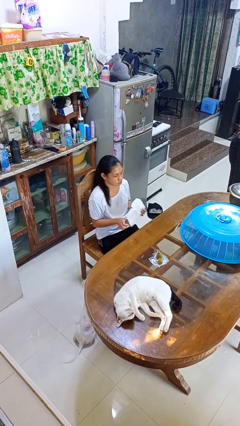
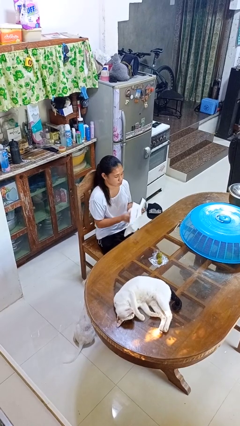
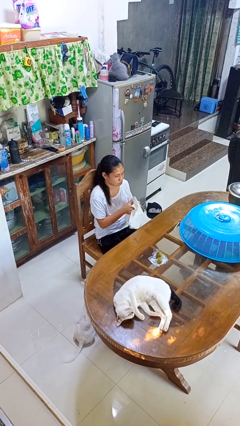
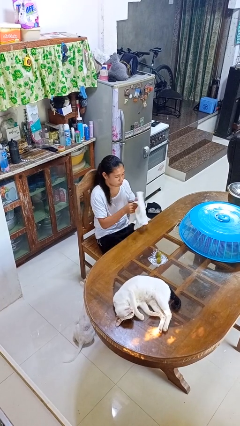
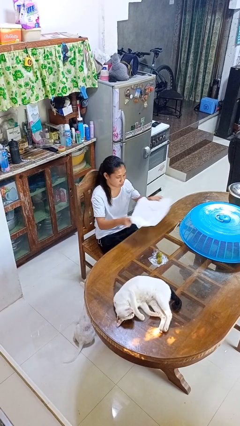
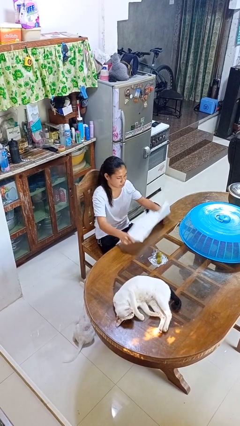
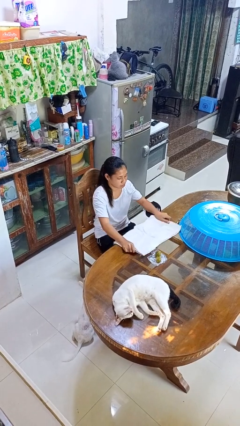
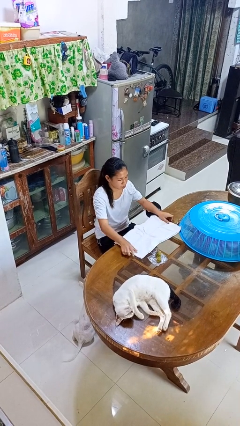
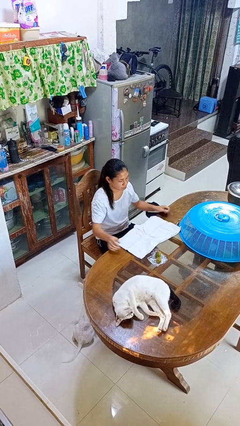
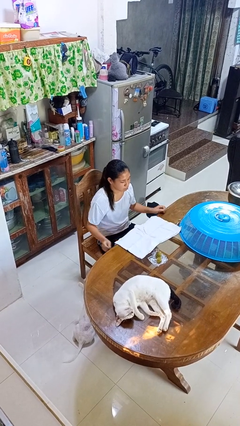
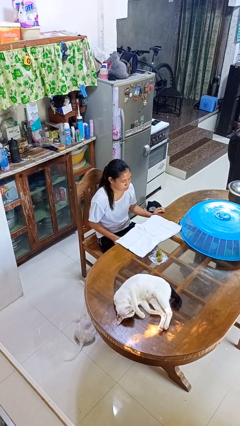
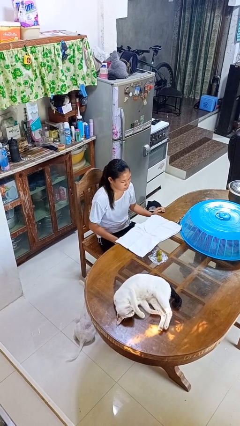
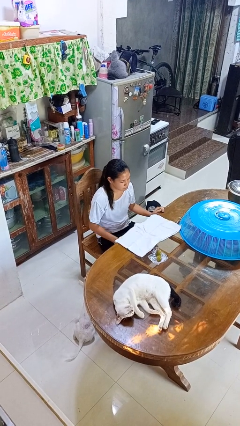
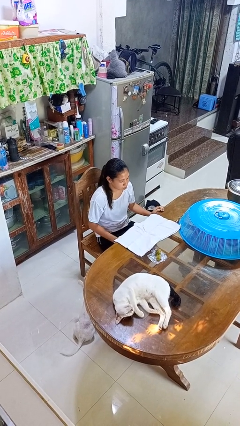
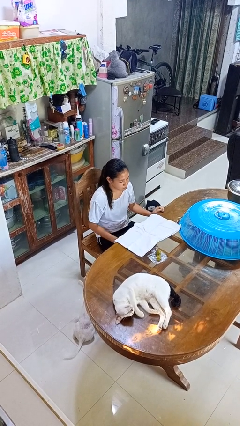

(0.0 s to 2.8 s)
person spreads tablecloth

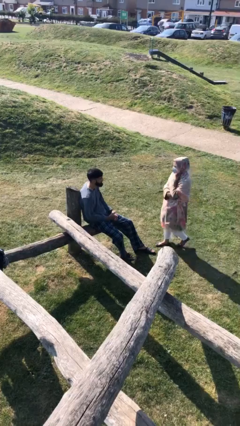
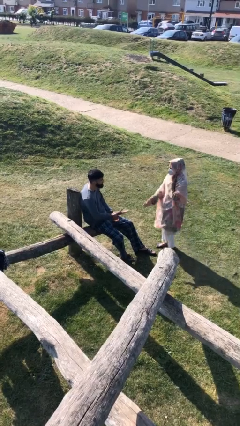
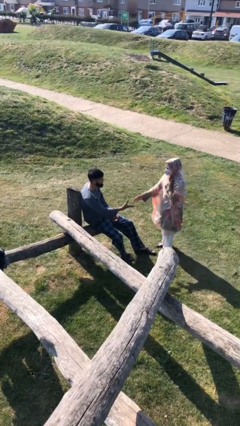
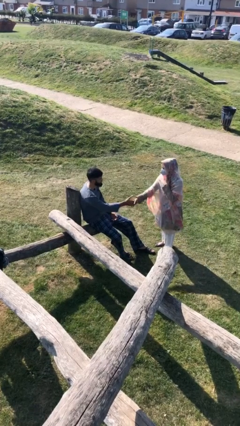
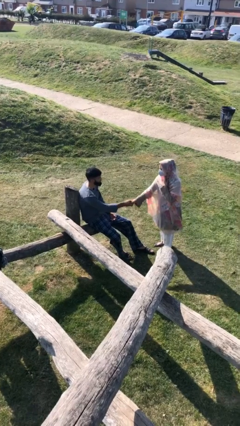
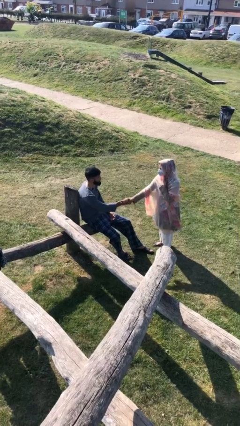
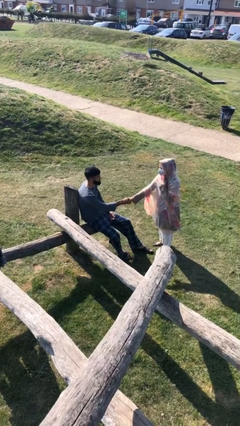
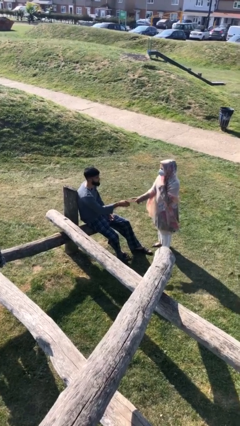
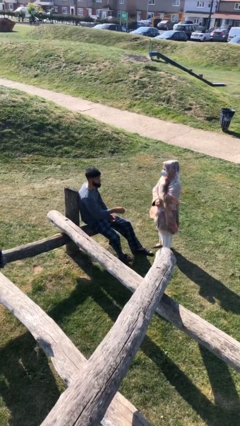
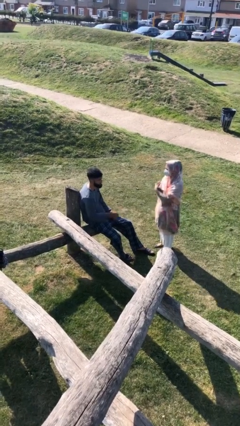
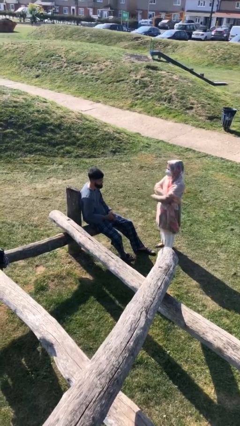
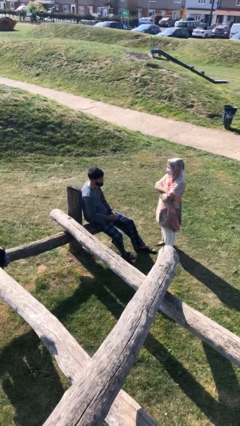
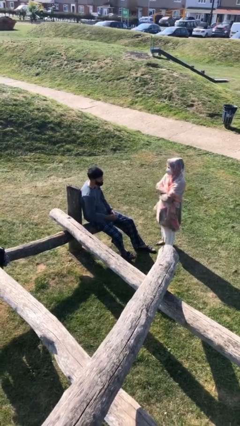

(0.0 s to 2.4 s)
person shakes hand

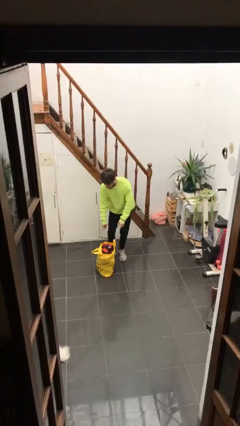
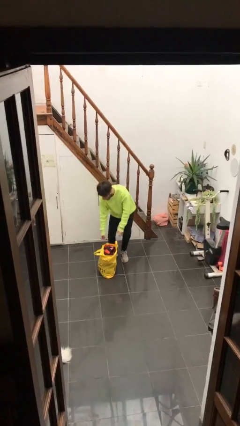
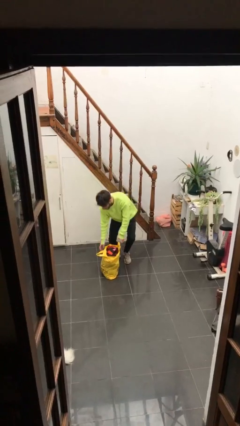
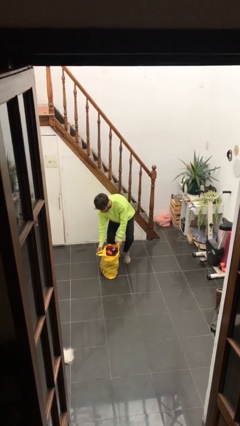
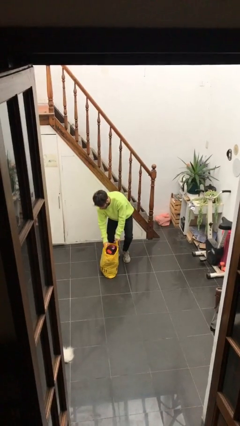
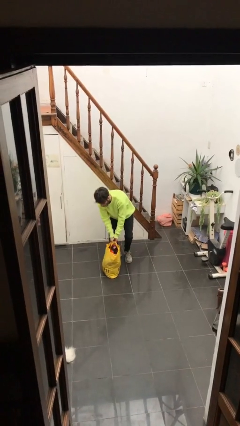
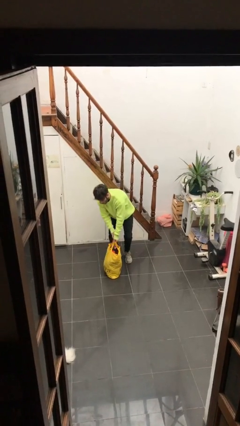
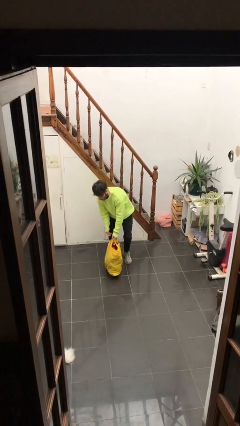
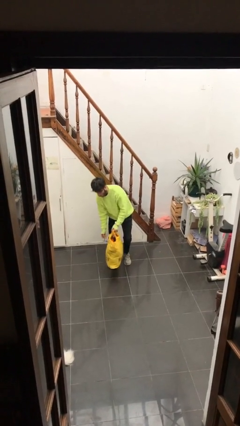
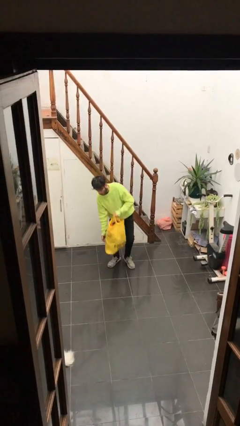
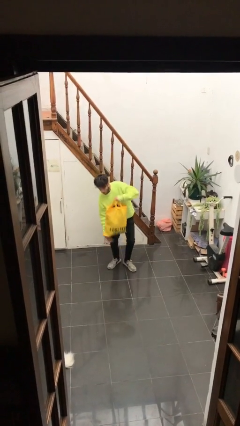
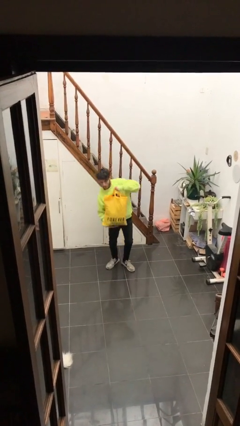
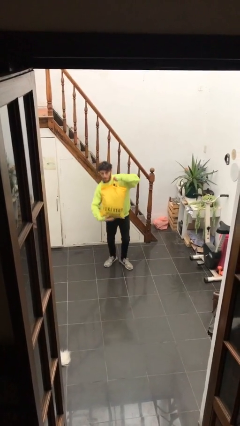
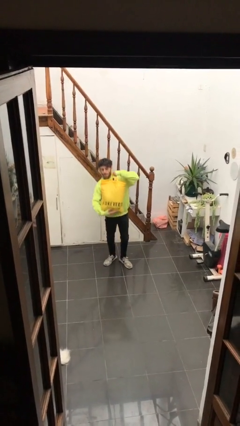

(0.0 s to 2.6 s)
person picks up object from floor

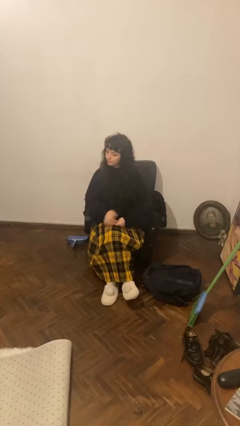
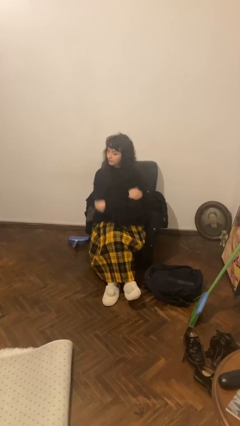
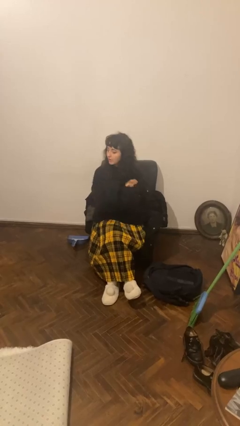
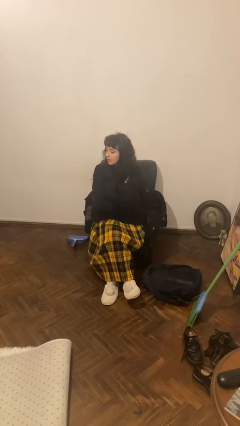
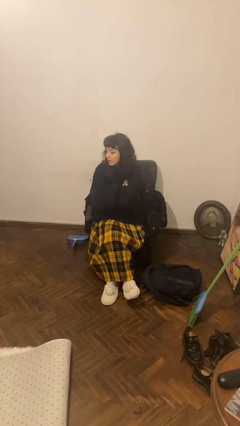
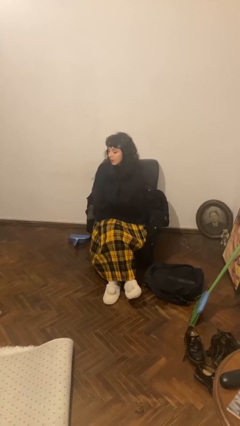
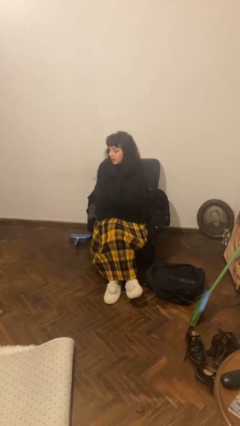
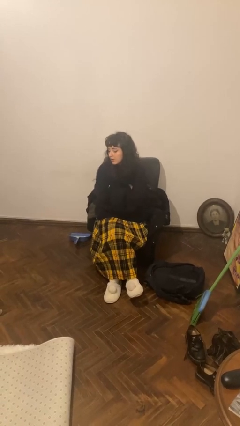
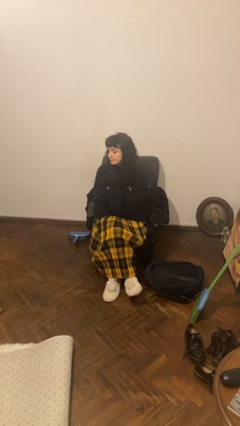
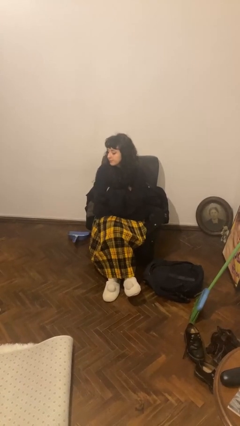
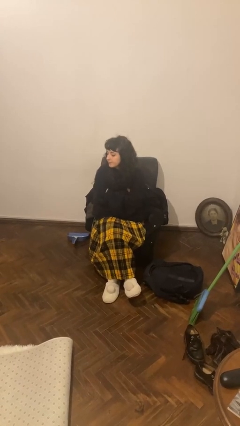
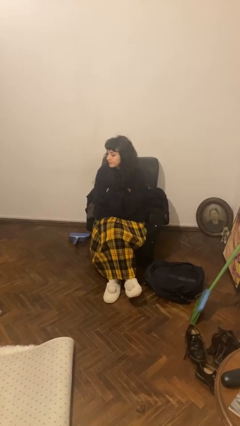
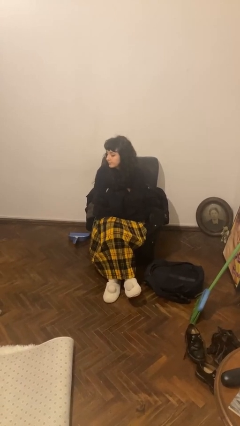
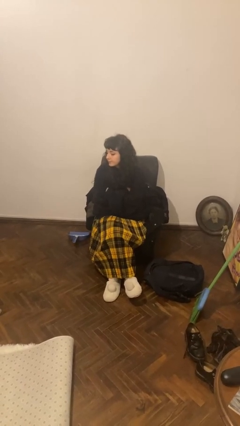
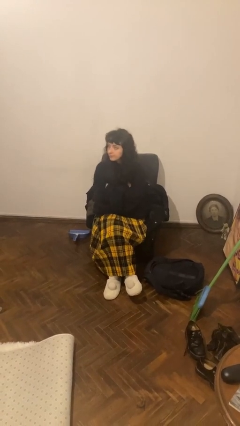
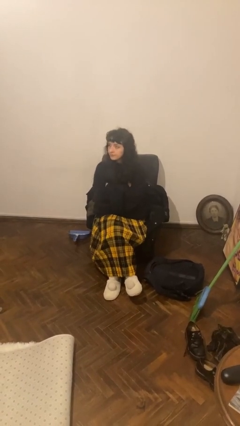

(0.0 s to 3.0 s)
person crosses arms

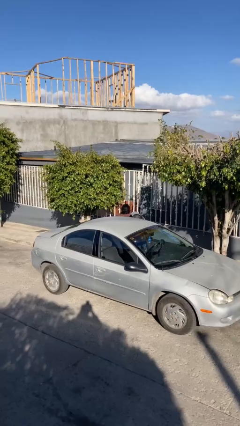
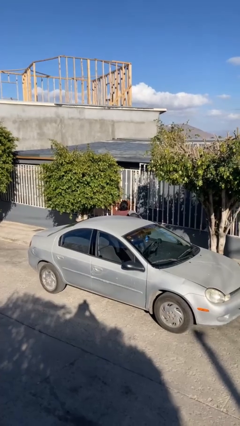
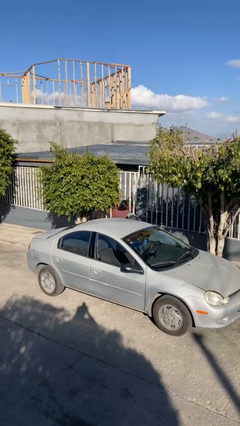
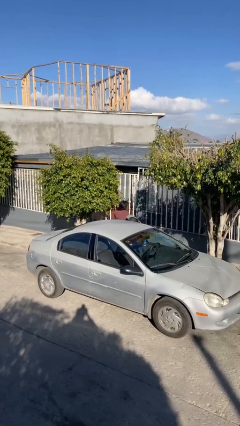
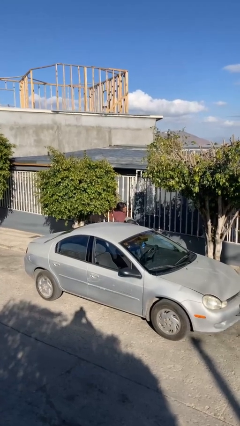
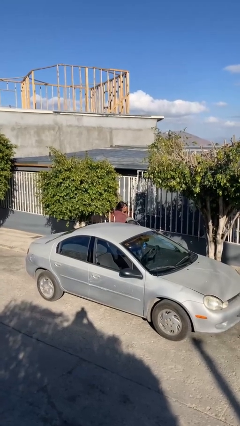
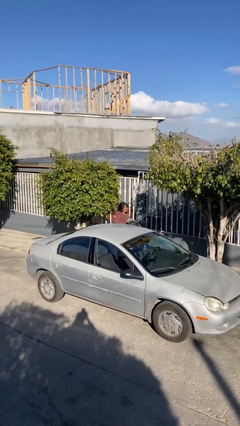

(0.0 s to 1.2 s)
person exits car

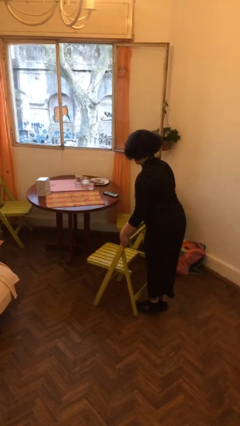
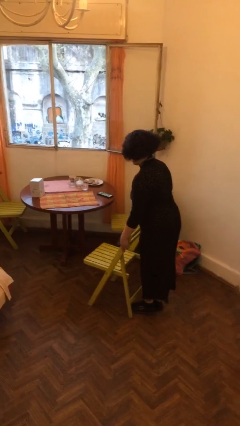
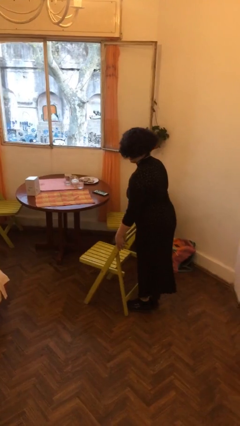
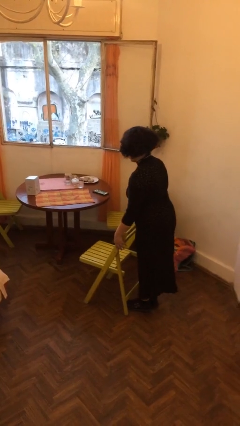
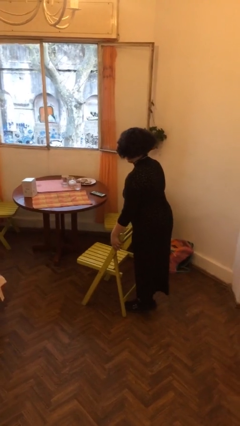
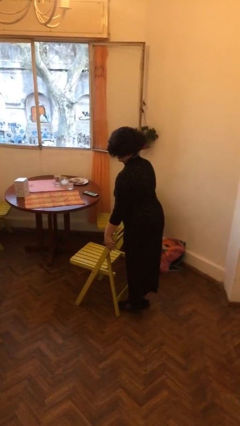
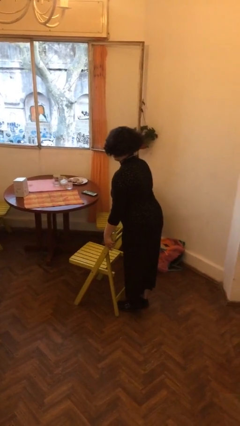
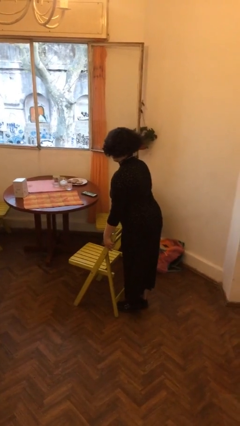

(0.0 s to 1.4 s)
person pushes in chair

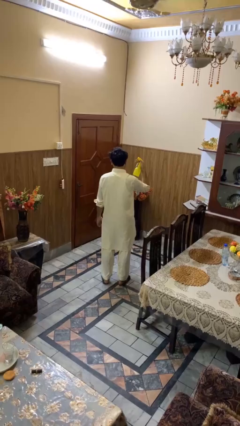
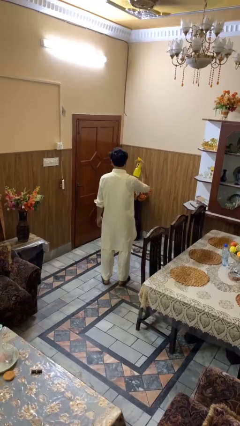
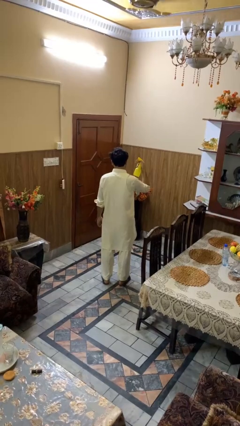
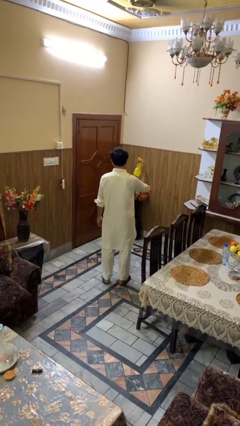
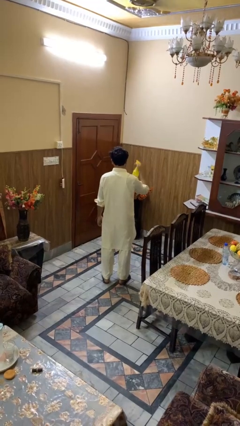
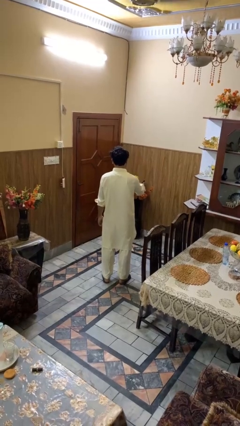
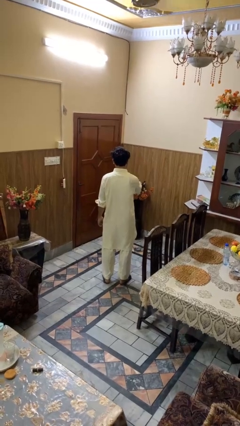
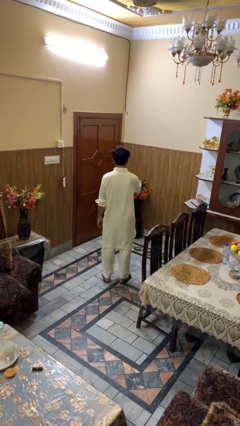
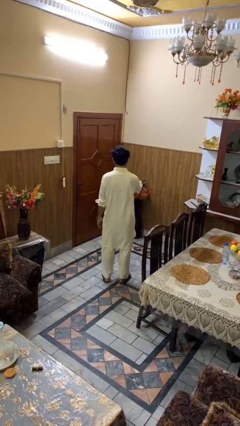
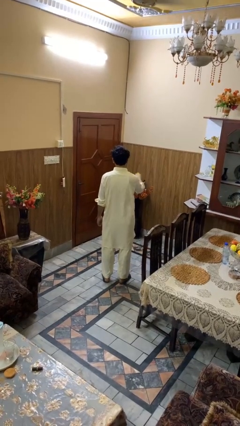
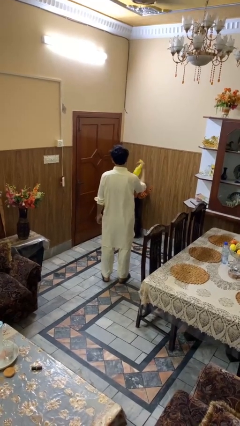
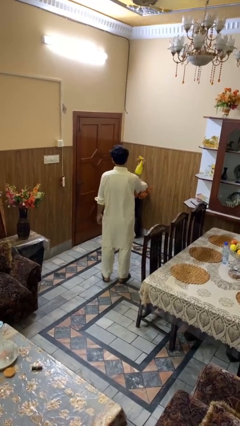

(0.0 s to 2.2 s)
person sprays from bottle

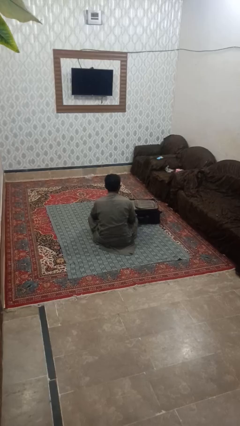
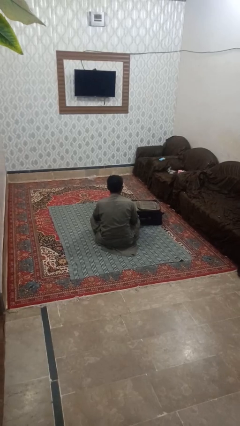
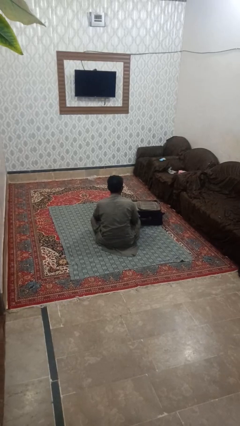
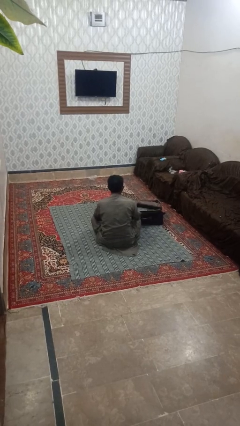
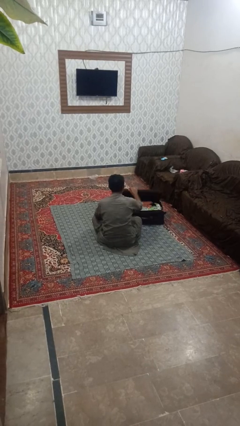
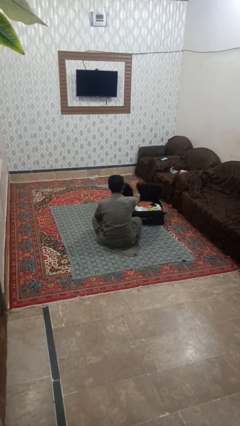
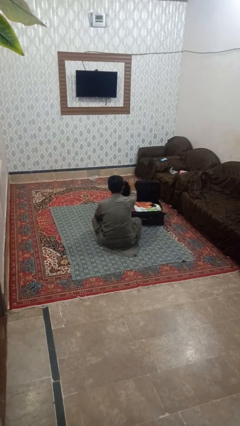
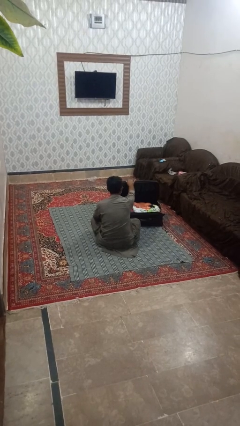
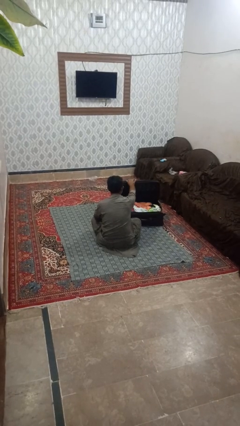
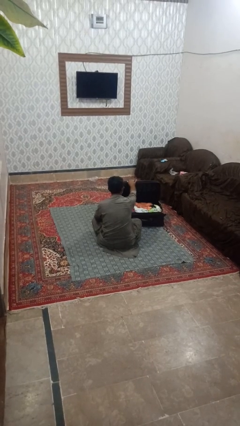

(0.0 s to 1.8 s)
person opens suitcase
